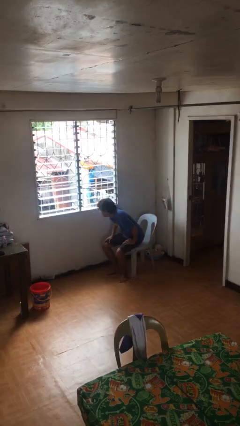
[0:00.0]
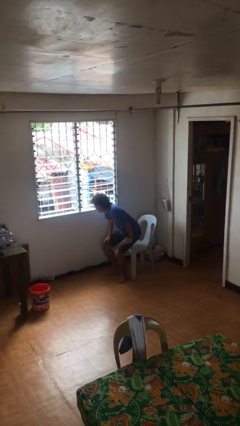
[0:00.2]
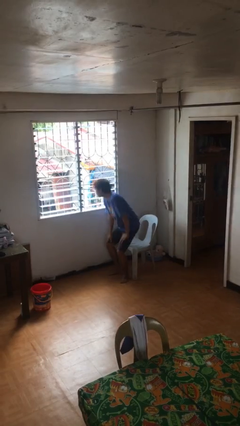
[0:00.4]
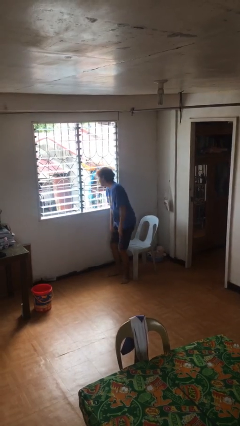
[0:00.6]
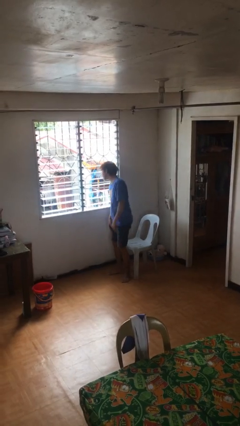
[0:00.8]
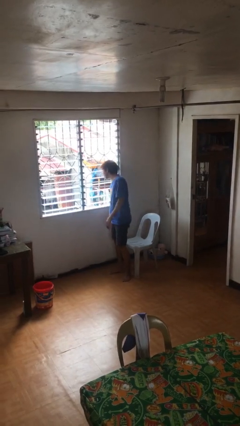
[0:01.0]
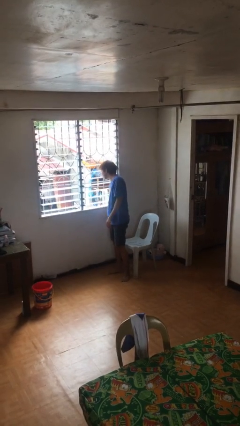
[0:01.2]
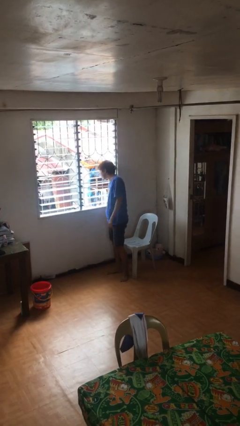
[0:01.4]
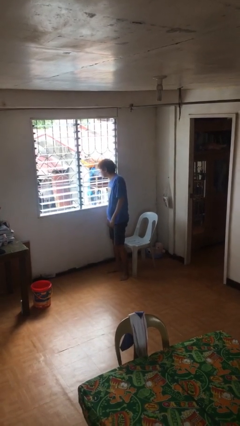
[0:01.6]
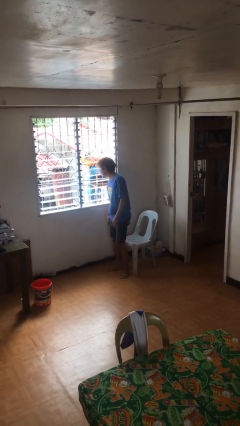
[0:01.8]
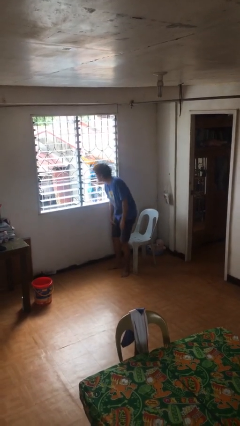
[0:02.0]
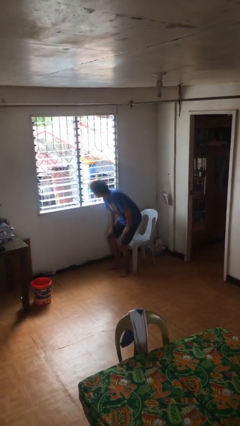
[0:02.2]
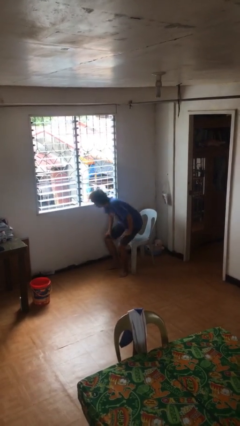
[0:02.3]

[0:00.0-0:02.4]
person stands up

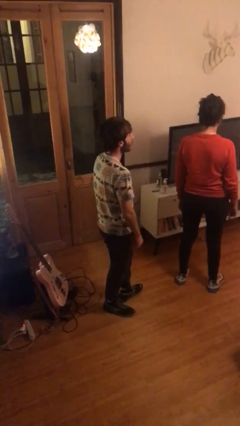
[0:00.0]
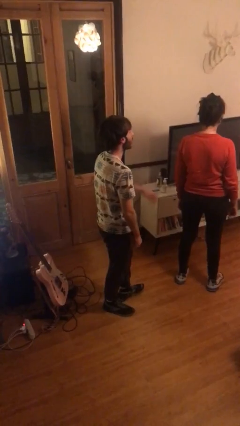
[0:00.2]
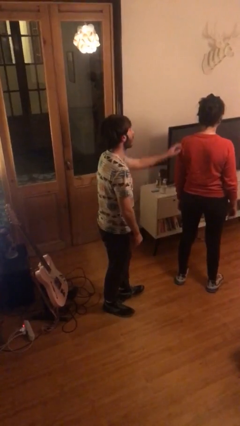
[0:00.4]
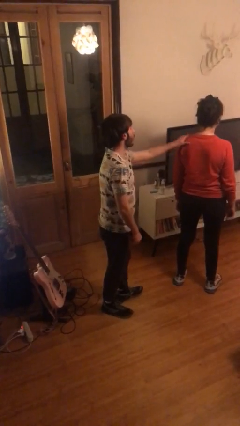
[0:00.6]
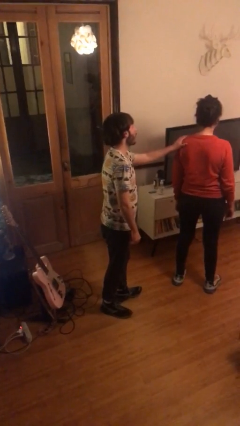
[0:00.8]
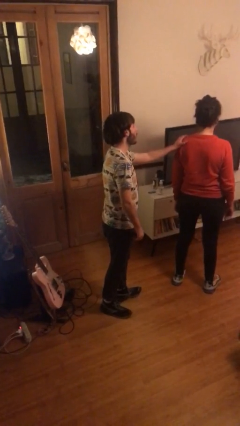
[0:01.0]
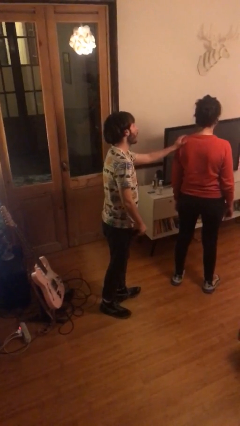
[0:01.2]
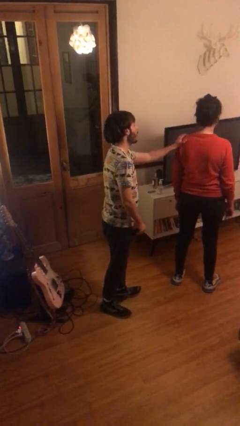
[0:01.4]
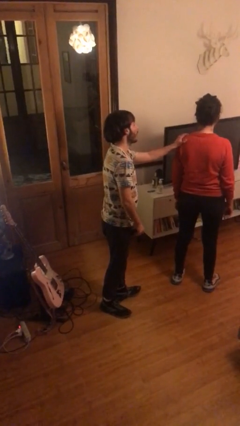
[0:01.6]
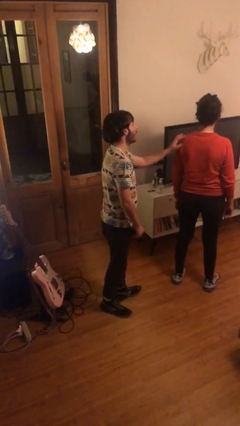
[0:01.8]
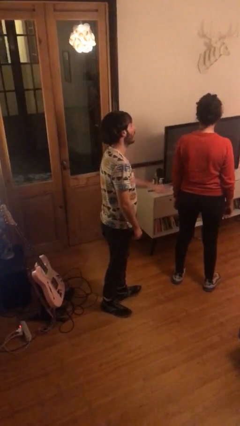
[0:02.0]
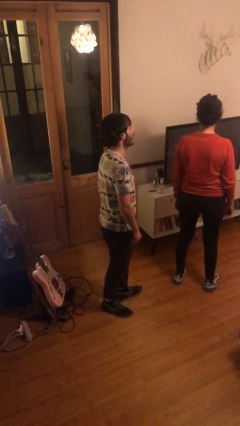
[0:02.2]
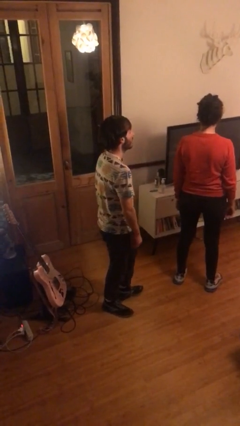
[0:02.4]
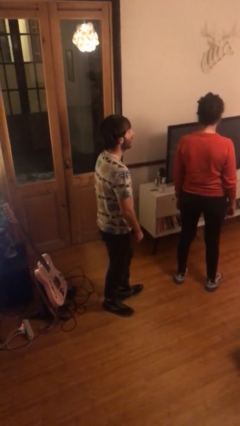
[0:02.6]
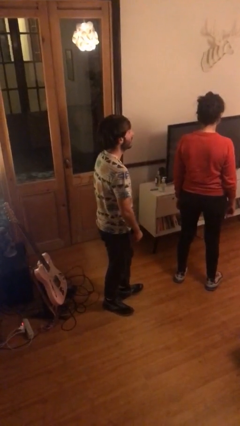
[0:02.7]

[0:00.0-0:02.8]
person touches back of person

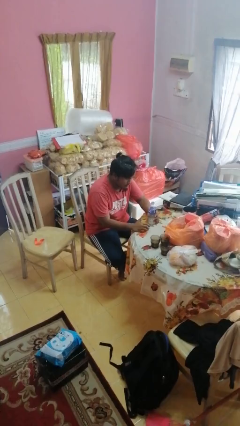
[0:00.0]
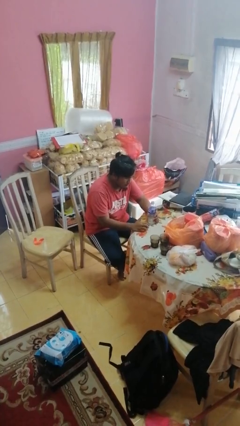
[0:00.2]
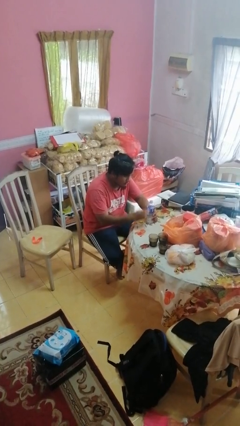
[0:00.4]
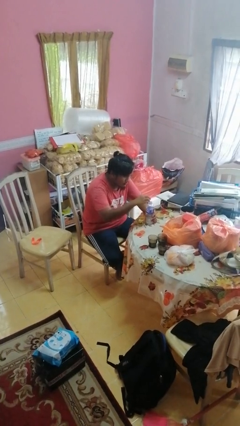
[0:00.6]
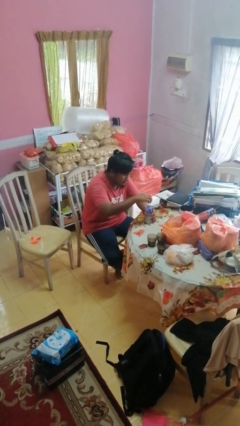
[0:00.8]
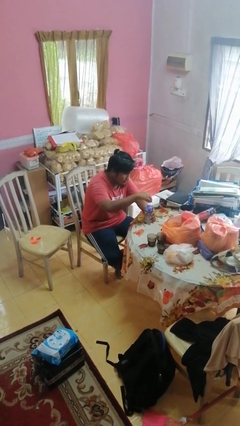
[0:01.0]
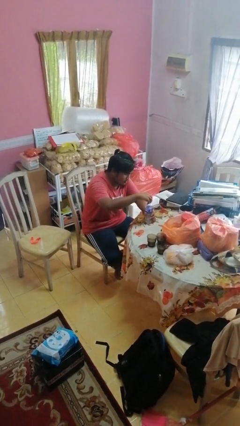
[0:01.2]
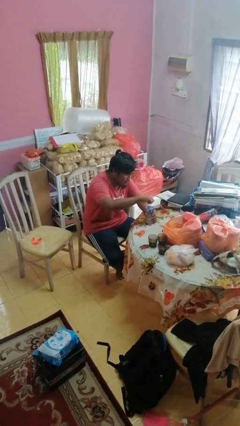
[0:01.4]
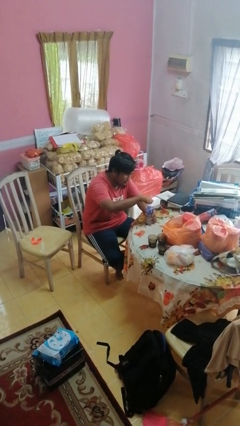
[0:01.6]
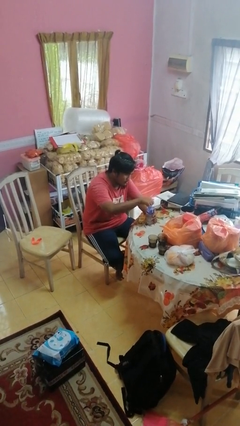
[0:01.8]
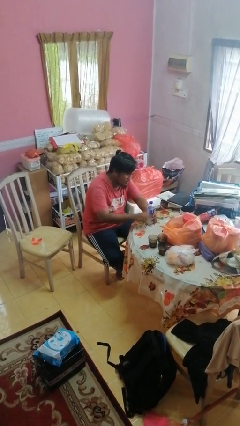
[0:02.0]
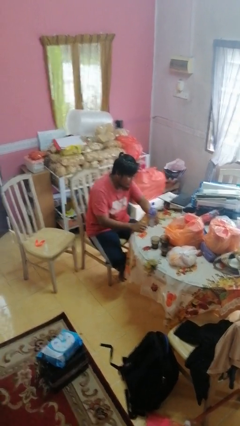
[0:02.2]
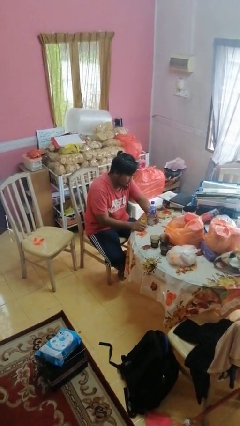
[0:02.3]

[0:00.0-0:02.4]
person screws lid to bottle

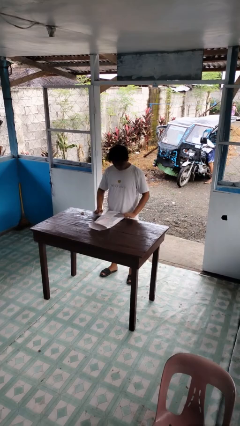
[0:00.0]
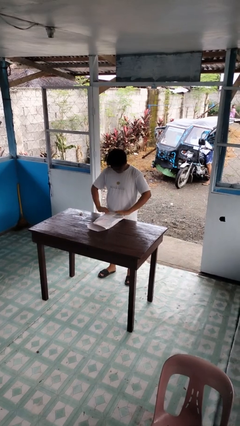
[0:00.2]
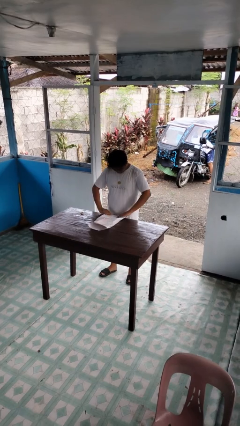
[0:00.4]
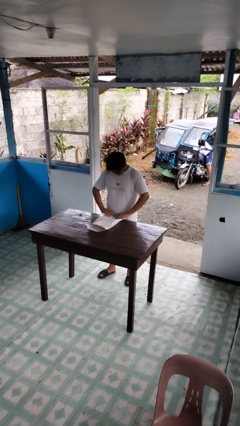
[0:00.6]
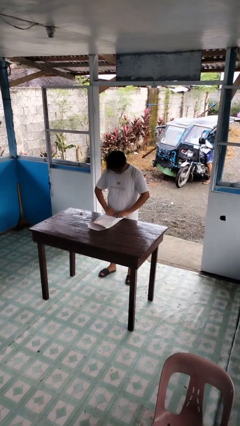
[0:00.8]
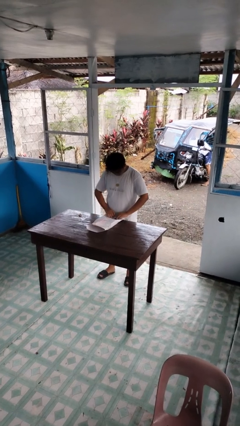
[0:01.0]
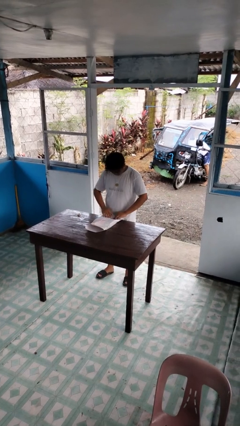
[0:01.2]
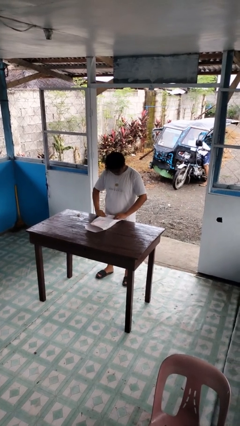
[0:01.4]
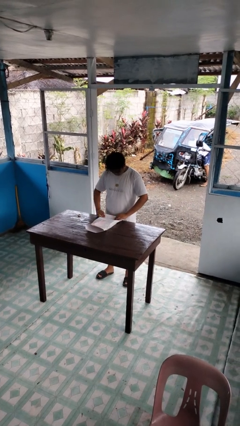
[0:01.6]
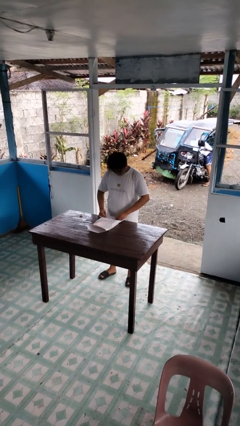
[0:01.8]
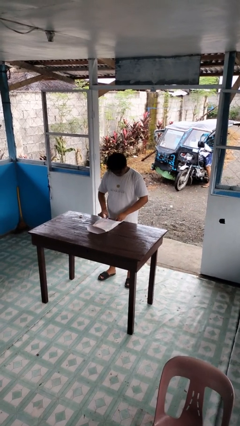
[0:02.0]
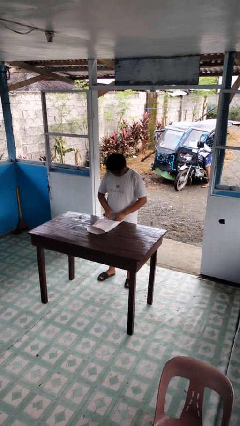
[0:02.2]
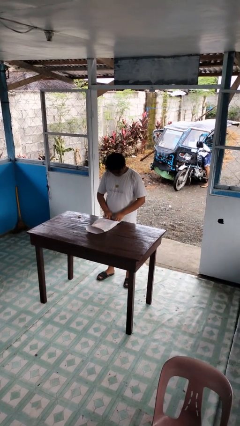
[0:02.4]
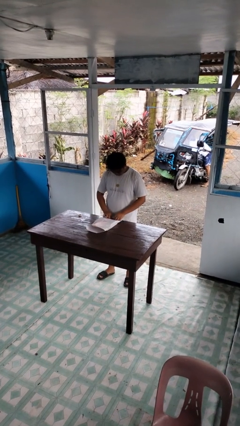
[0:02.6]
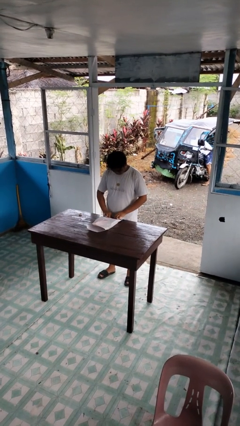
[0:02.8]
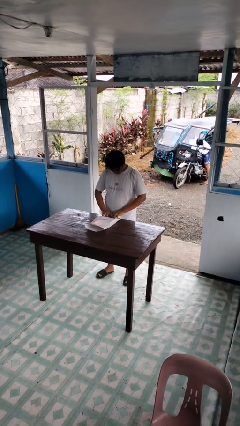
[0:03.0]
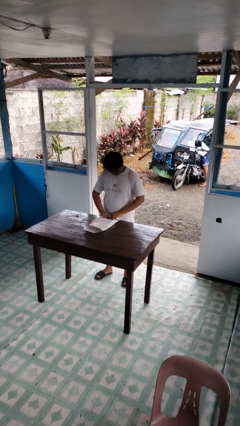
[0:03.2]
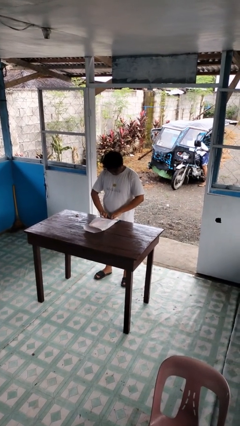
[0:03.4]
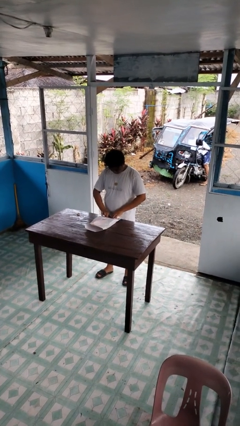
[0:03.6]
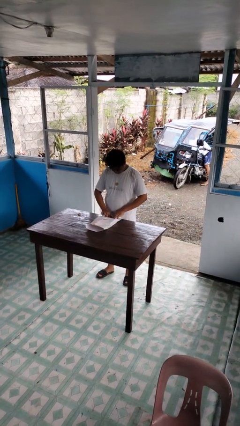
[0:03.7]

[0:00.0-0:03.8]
person wraps box

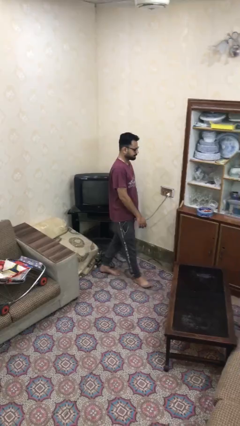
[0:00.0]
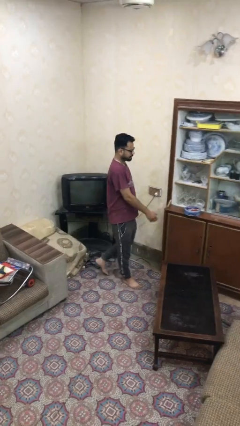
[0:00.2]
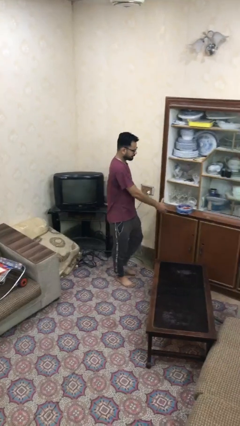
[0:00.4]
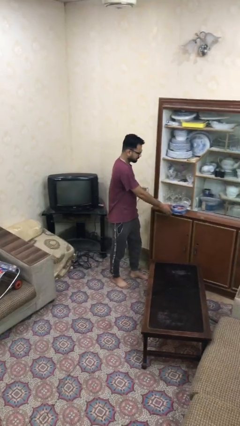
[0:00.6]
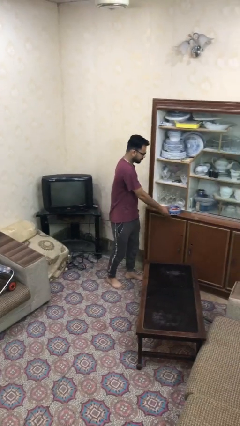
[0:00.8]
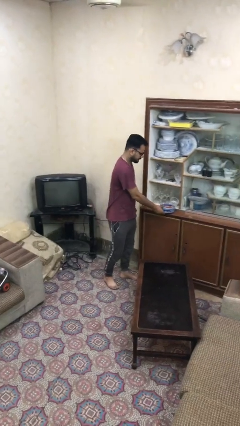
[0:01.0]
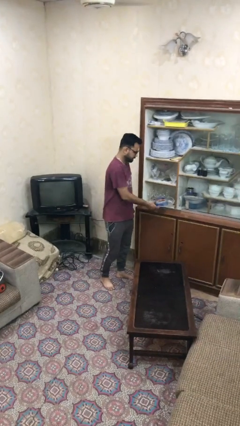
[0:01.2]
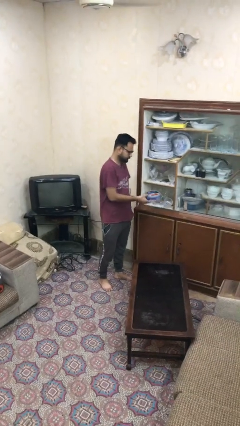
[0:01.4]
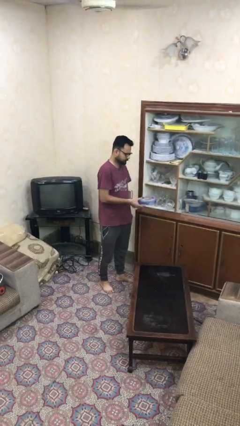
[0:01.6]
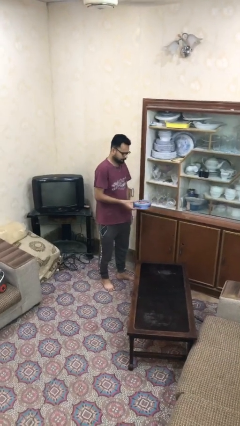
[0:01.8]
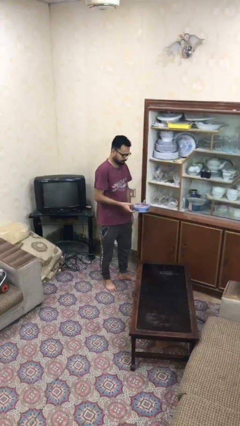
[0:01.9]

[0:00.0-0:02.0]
person picks up object from shelf

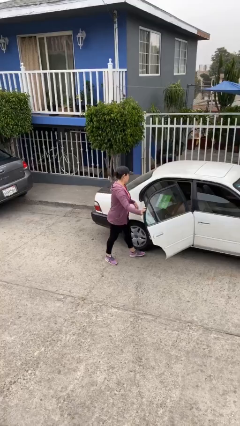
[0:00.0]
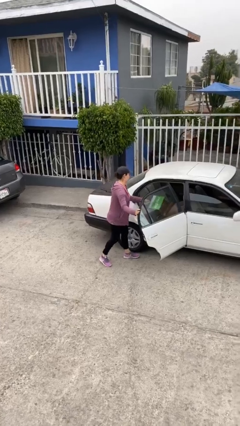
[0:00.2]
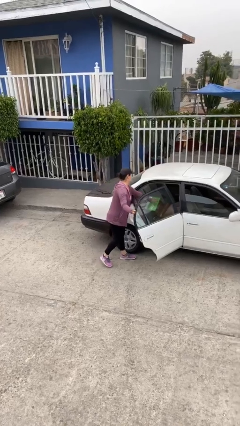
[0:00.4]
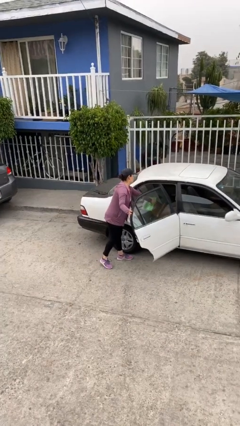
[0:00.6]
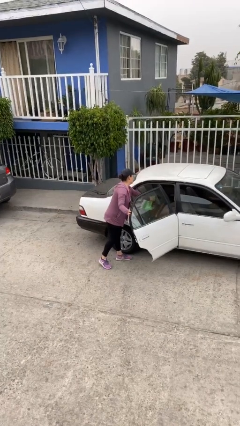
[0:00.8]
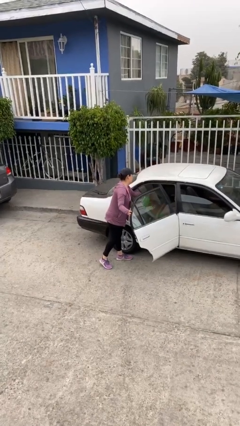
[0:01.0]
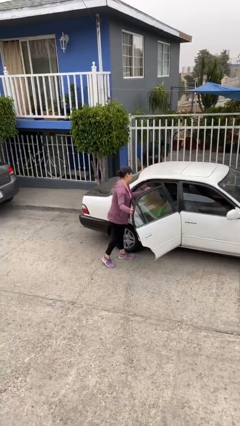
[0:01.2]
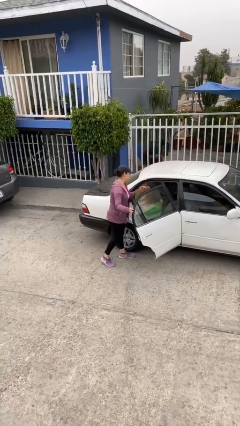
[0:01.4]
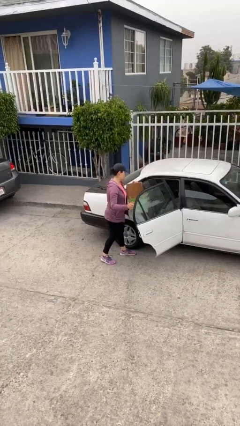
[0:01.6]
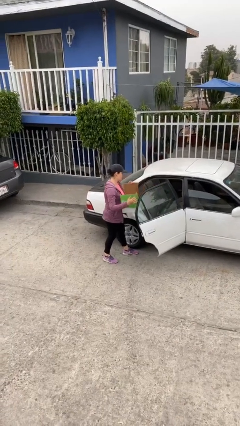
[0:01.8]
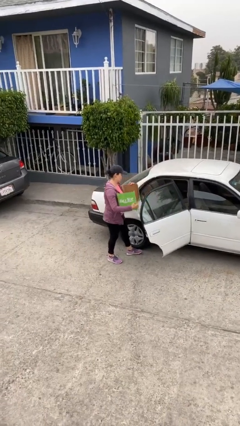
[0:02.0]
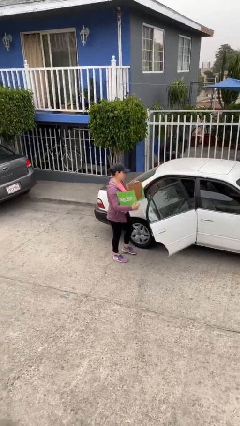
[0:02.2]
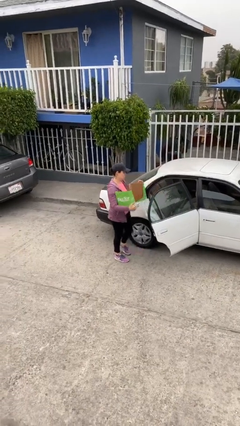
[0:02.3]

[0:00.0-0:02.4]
person unloads car

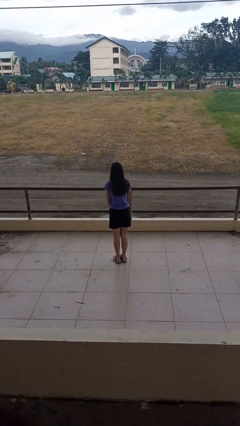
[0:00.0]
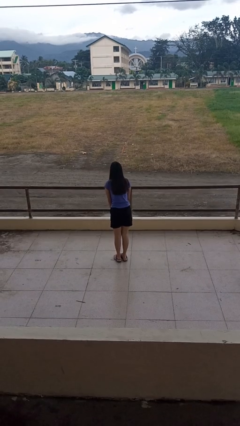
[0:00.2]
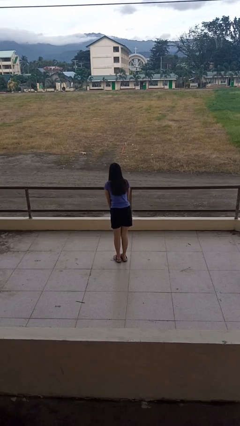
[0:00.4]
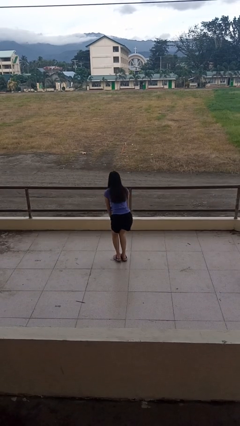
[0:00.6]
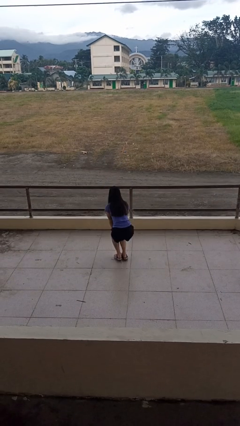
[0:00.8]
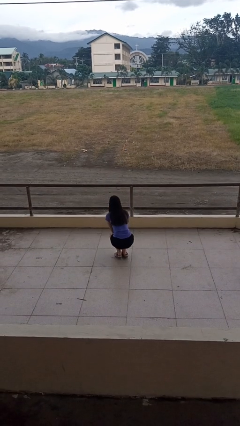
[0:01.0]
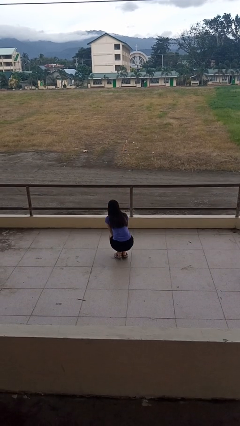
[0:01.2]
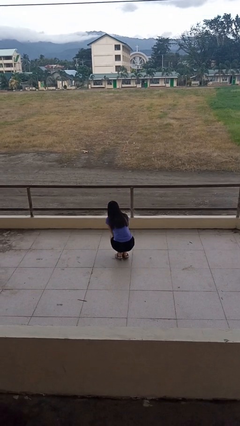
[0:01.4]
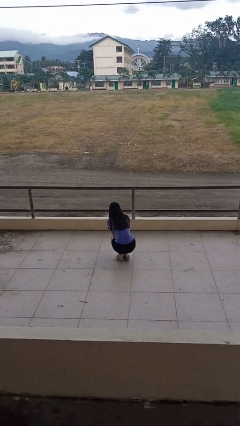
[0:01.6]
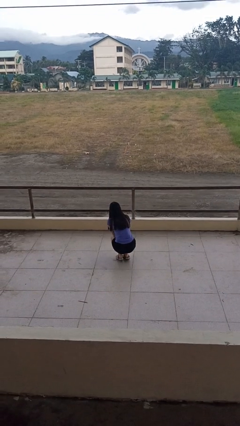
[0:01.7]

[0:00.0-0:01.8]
person squats
